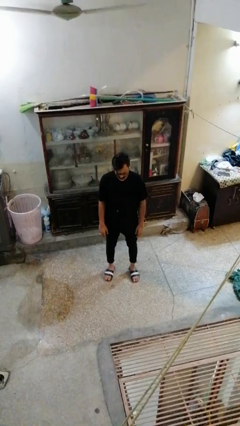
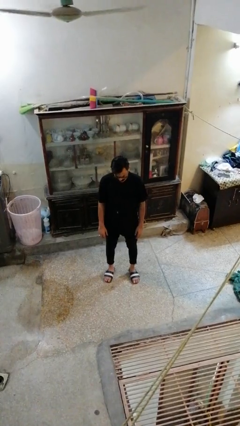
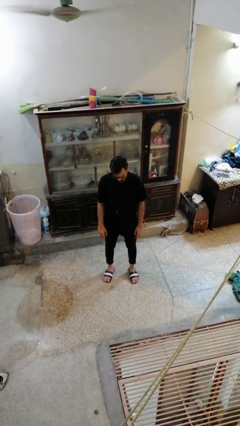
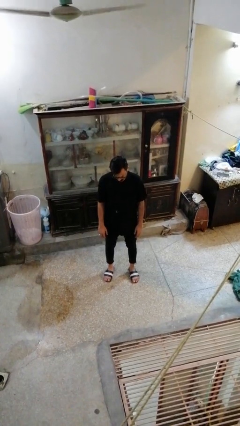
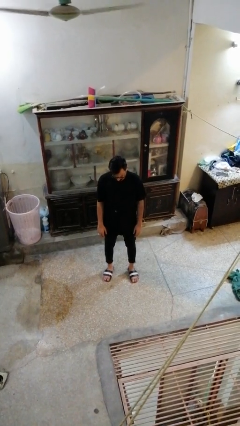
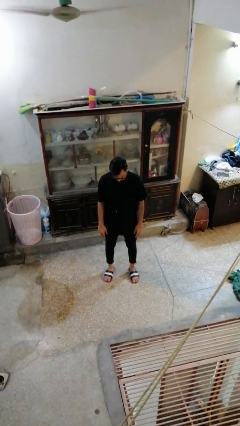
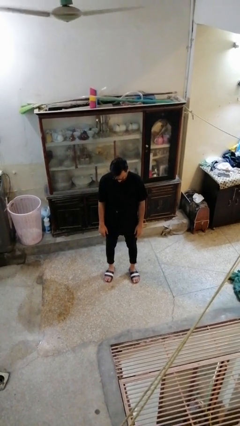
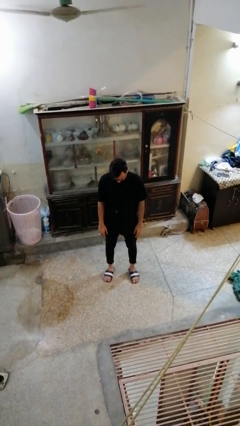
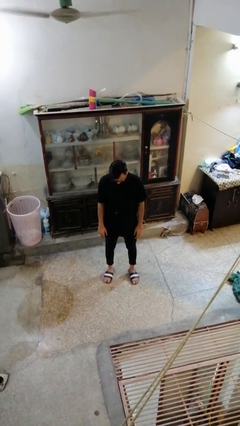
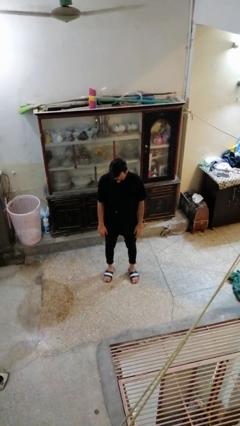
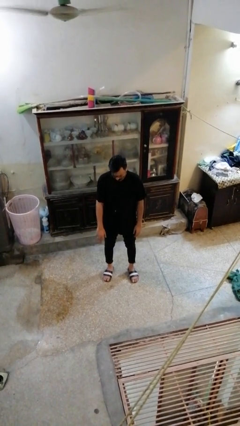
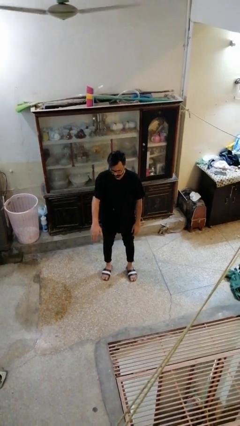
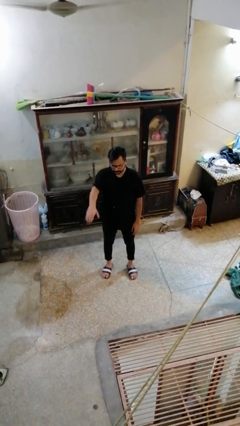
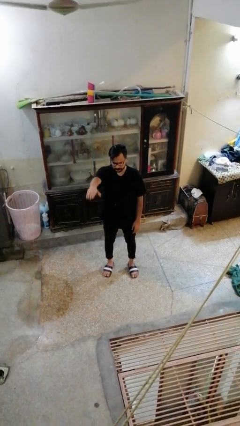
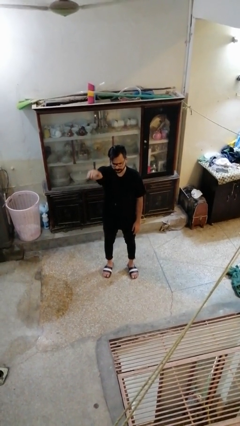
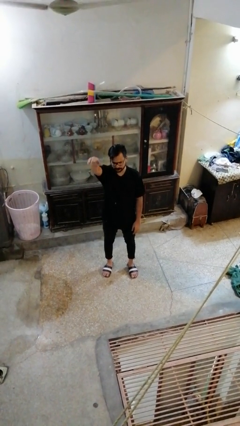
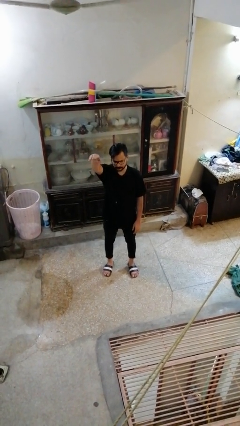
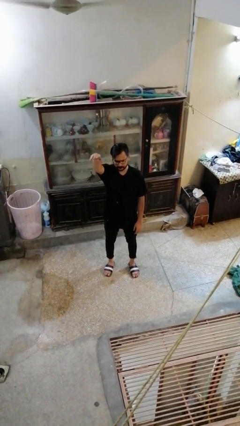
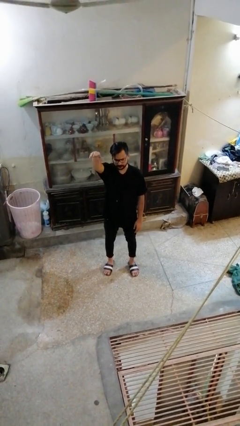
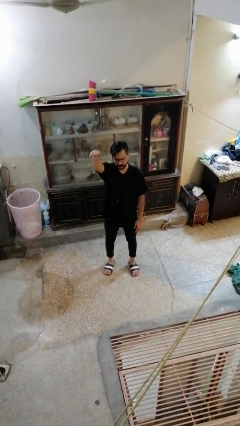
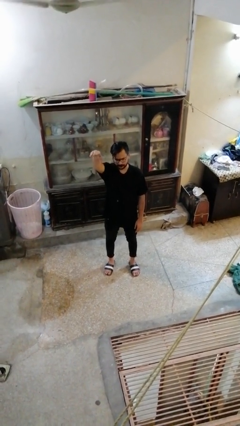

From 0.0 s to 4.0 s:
person gestures swipe up

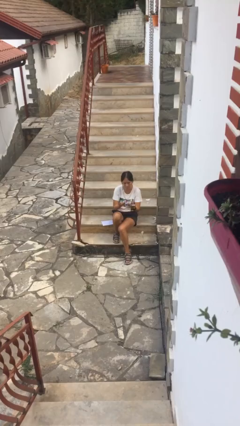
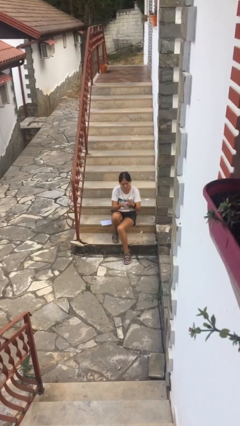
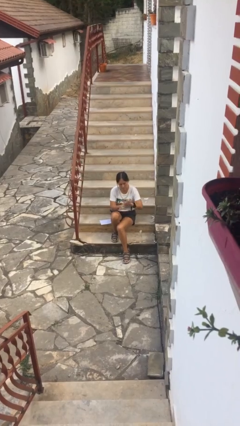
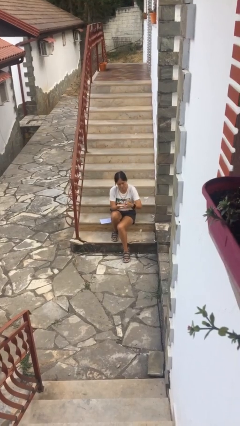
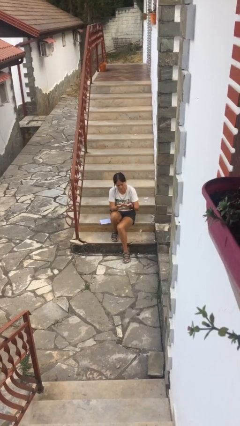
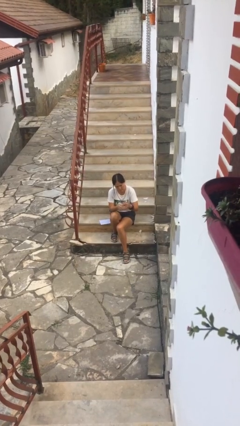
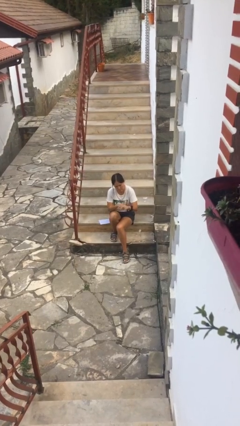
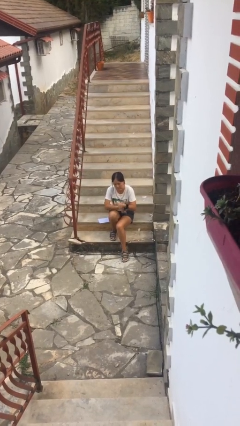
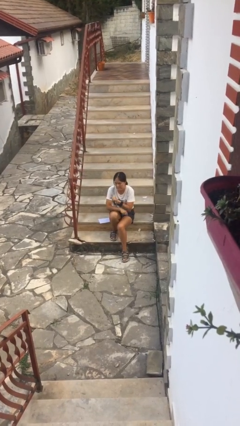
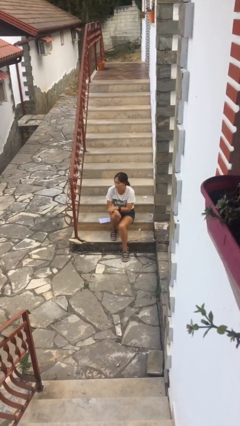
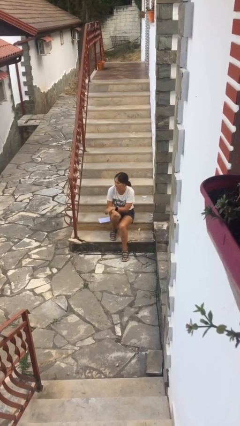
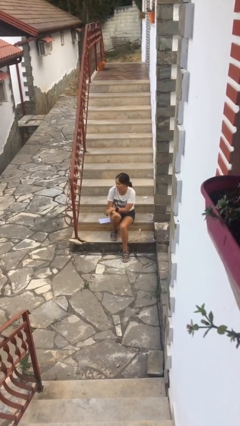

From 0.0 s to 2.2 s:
person looks at hands in lap

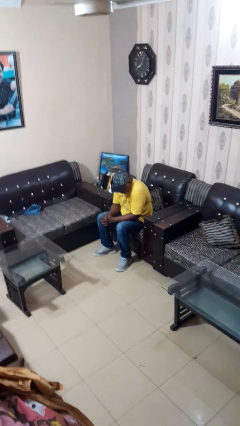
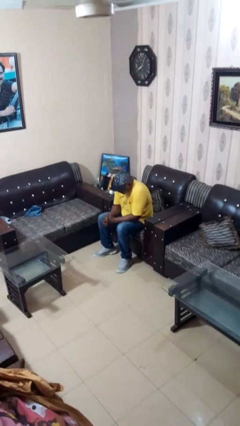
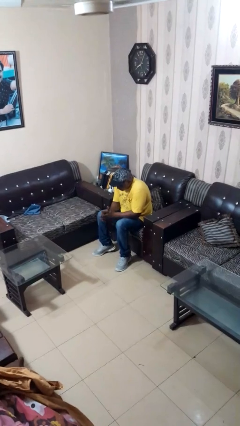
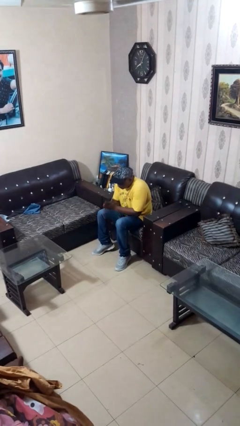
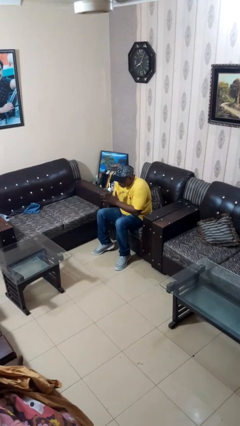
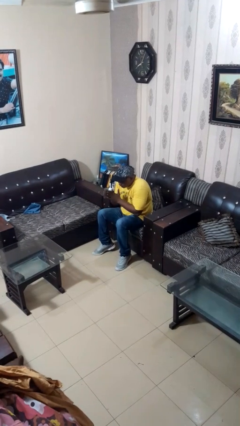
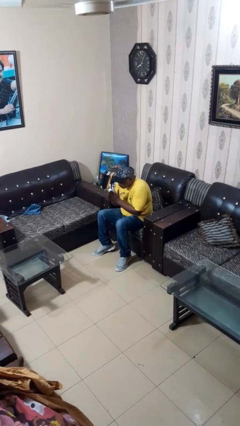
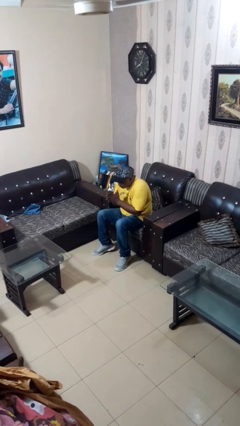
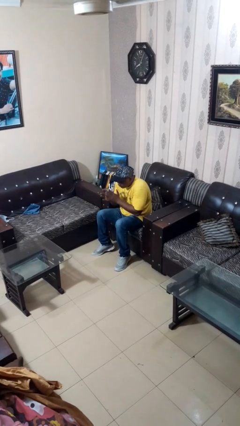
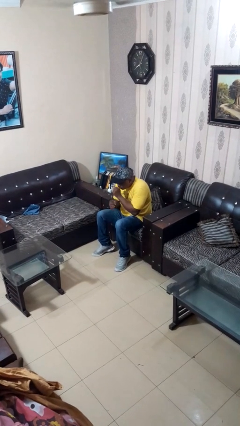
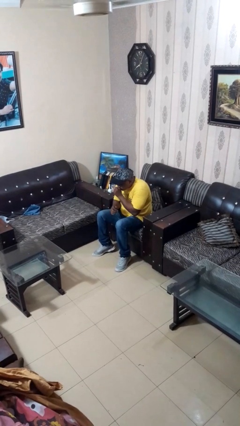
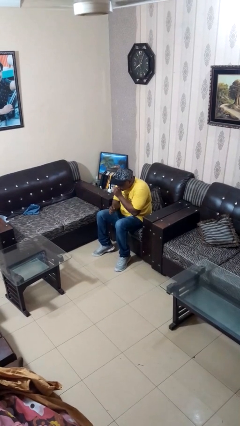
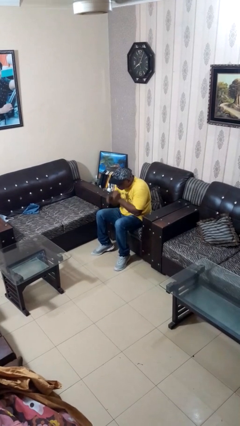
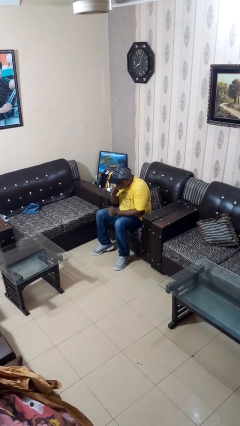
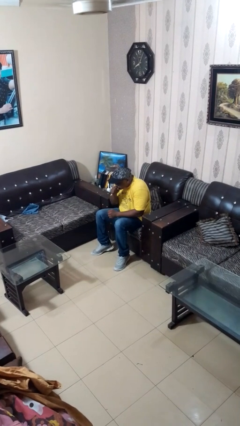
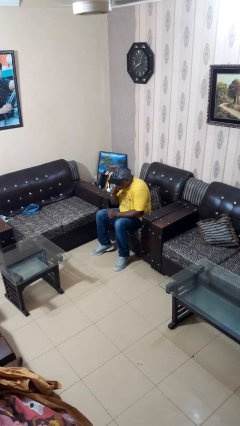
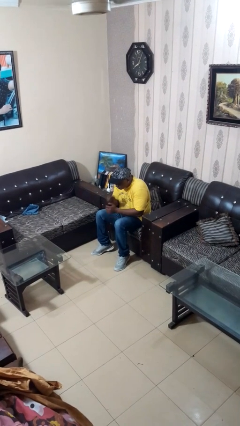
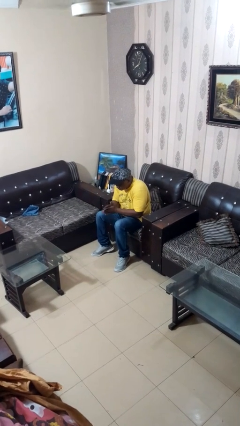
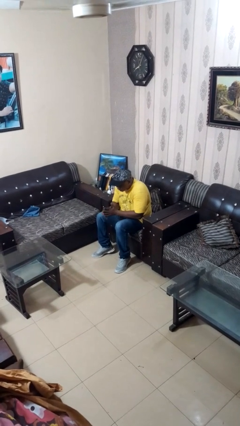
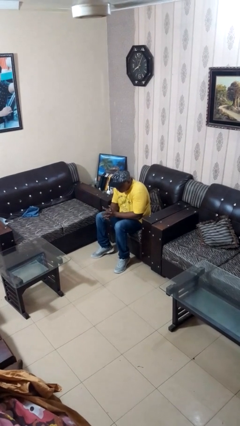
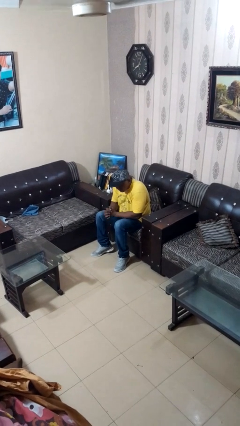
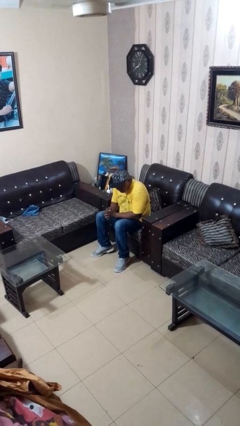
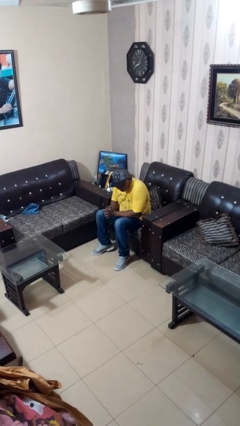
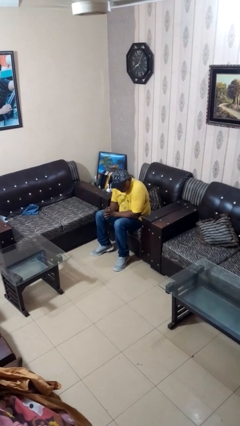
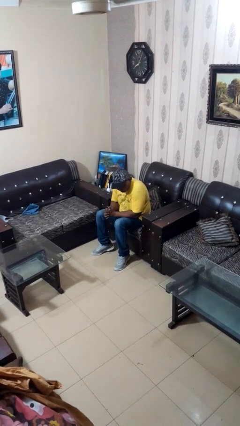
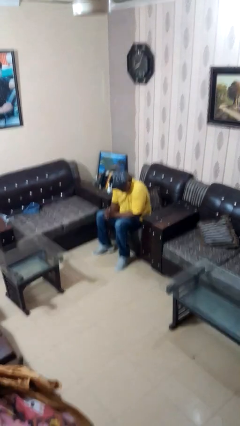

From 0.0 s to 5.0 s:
person blows into hands

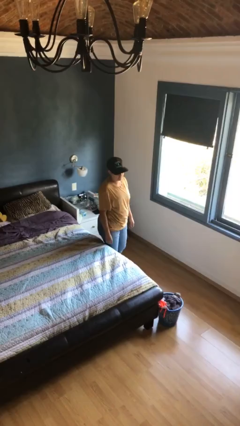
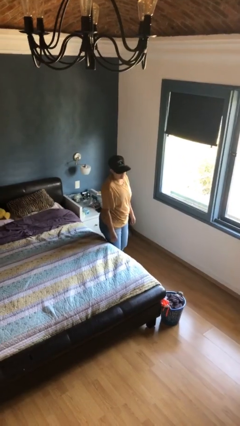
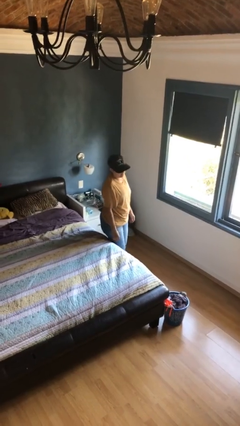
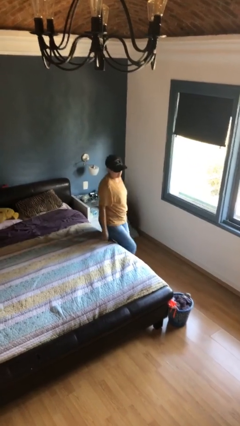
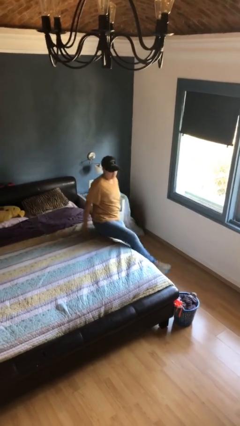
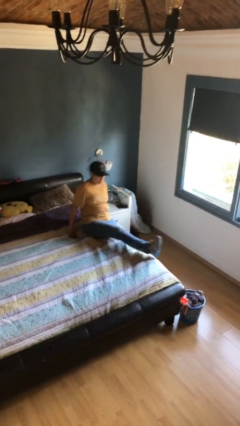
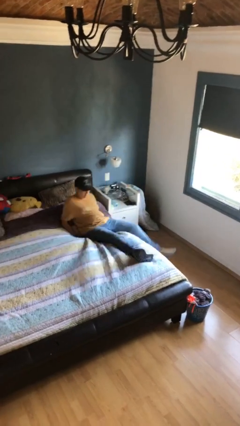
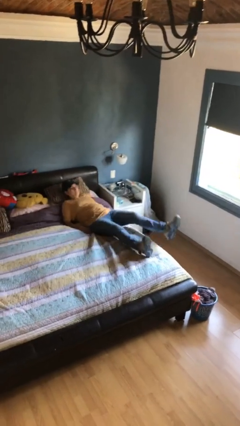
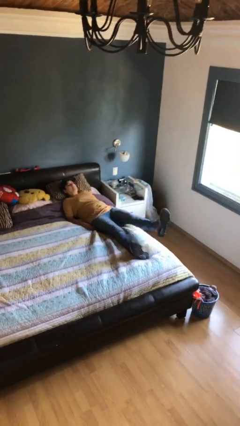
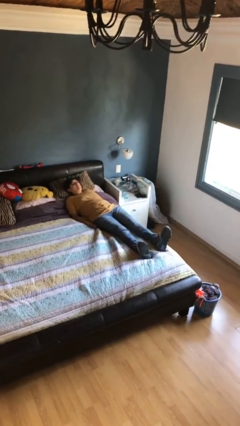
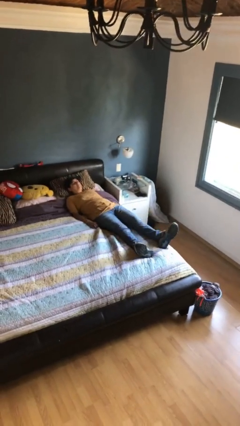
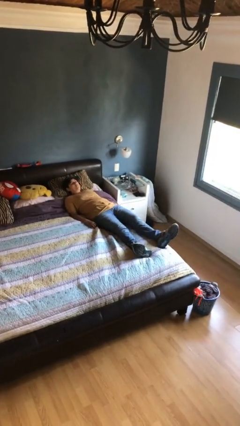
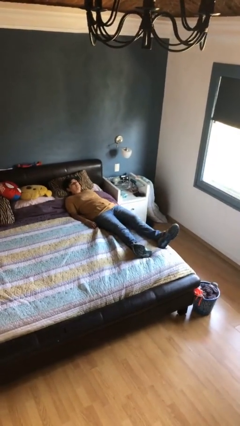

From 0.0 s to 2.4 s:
person lies down on bed

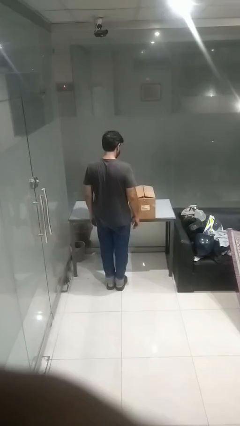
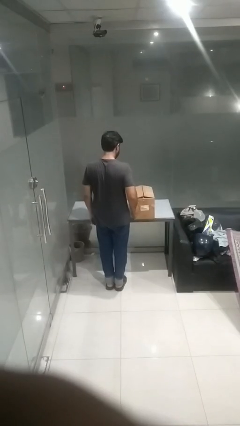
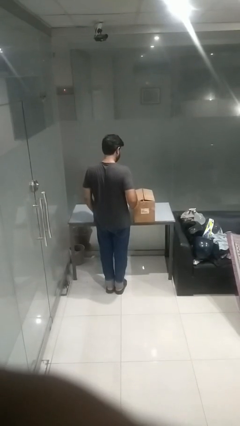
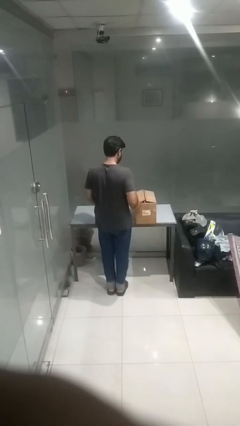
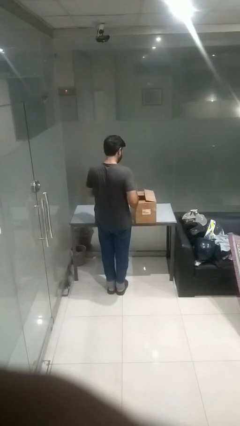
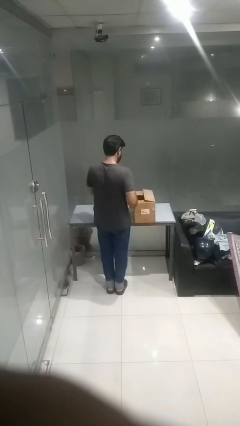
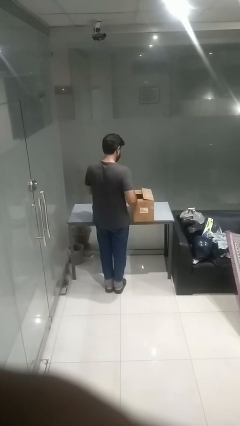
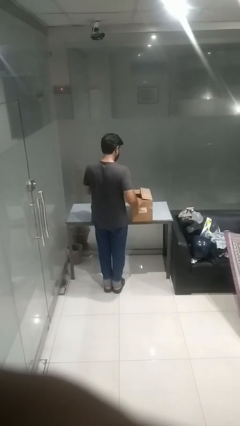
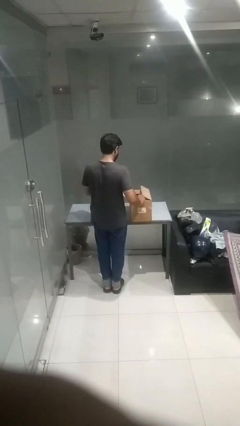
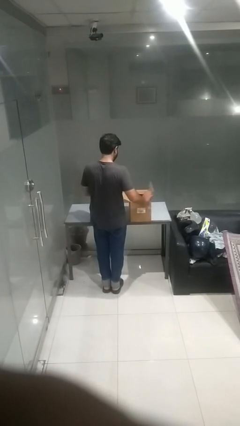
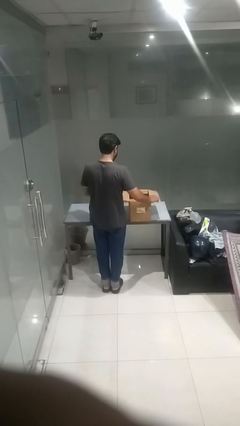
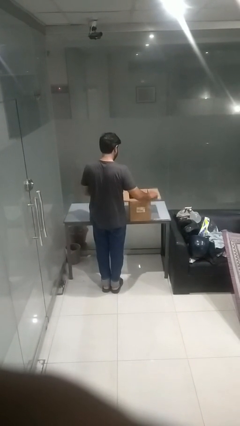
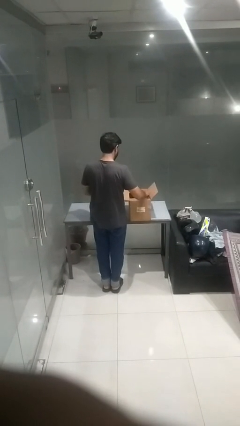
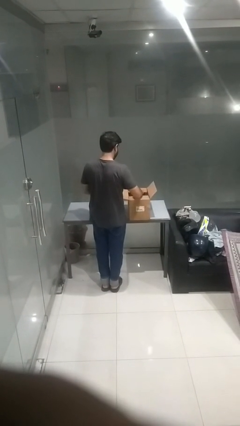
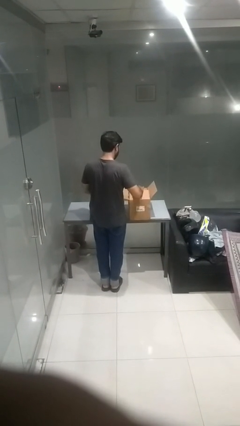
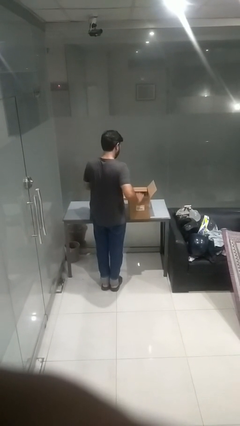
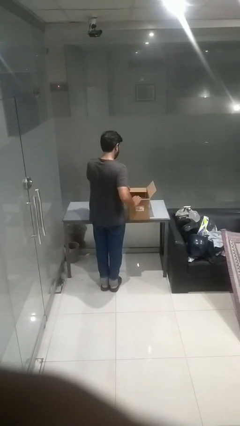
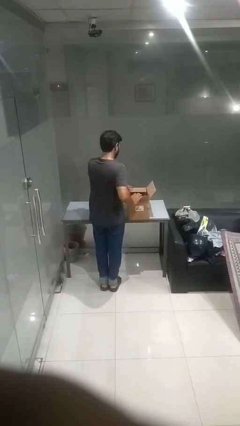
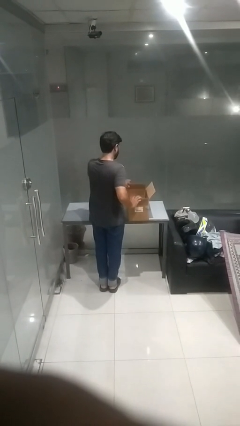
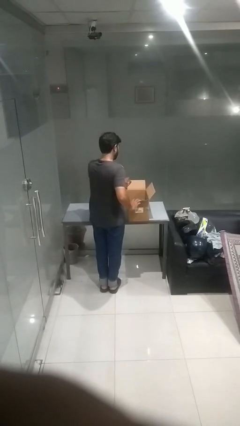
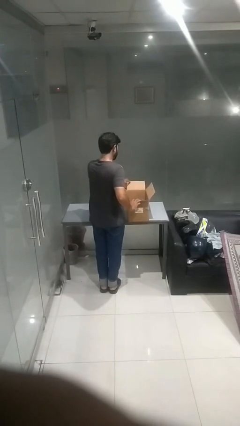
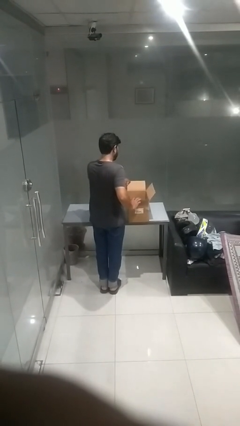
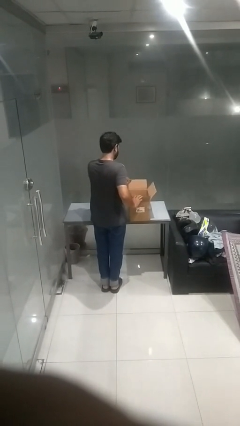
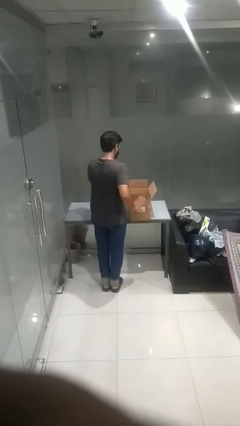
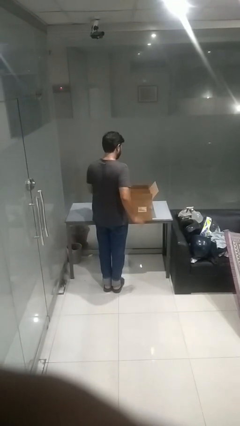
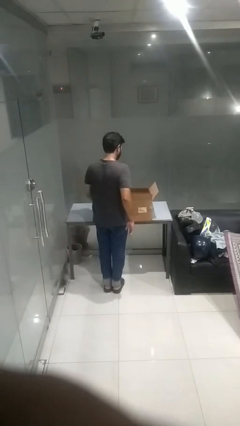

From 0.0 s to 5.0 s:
person opens box
